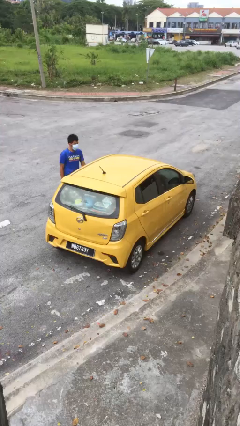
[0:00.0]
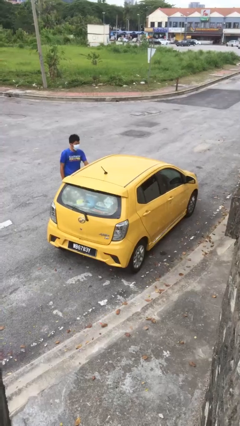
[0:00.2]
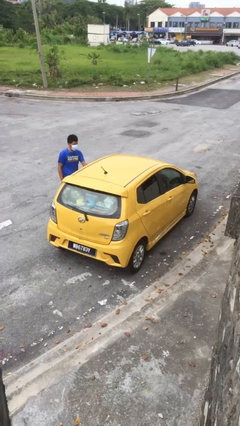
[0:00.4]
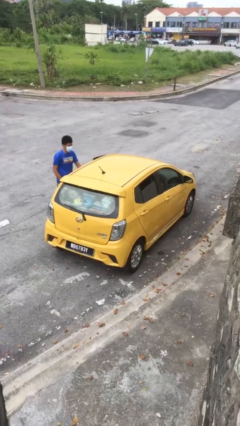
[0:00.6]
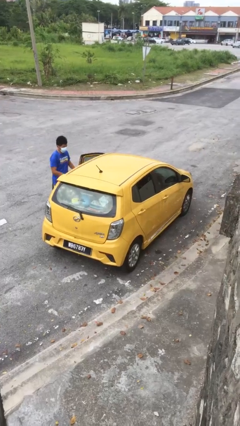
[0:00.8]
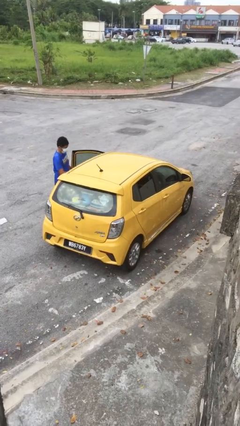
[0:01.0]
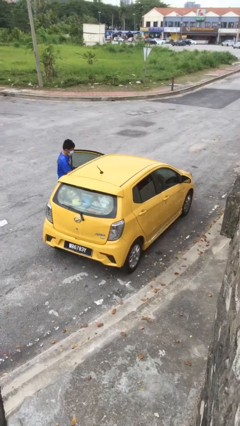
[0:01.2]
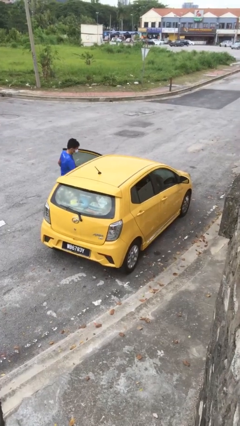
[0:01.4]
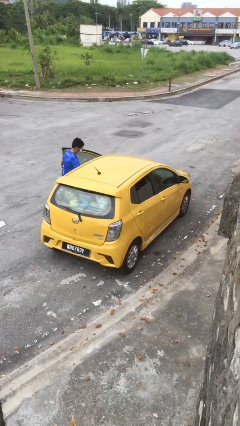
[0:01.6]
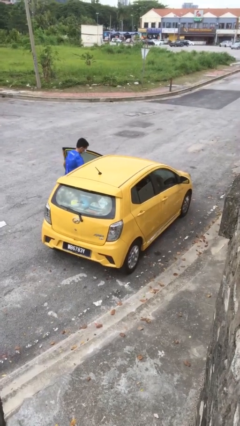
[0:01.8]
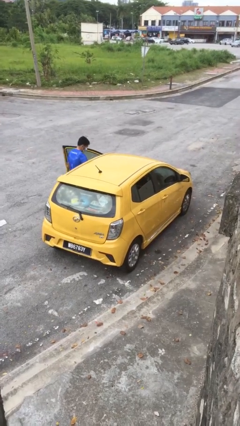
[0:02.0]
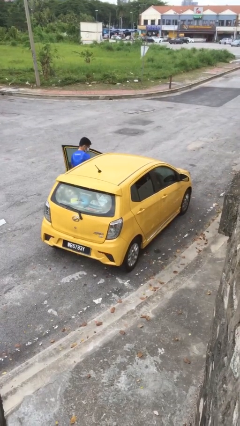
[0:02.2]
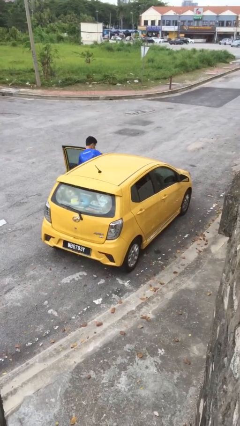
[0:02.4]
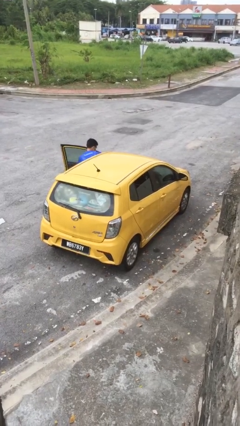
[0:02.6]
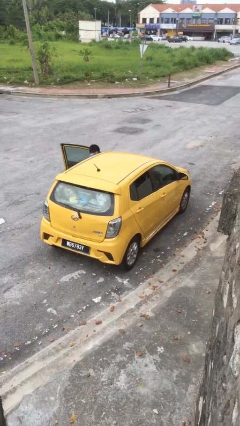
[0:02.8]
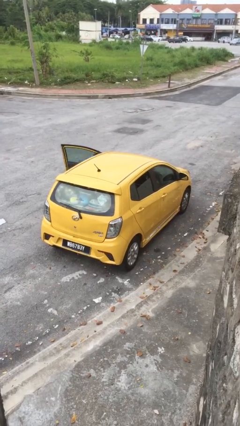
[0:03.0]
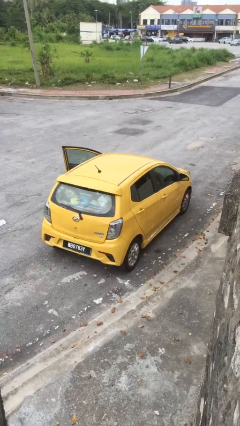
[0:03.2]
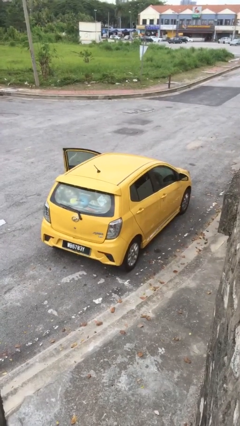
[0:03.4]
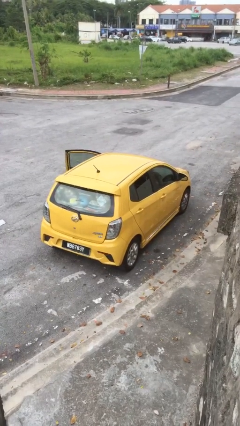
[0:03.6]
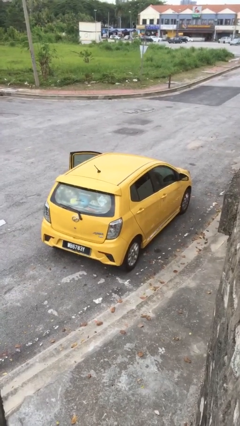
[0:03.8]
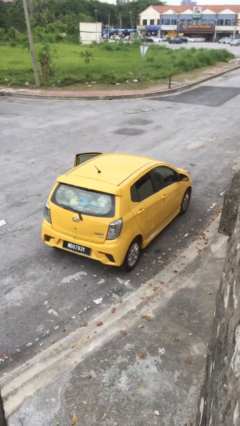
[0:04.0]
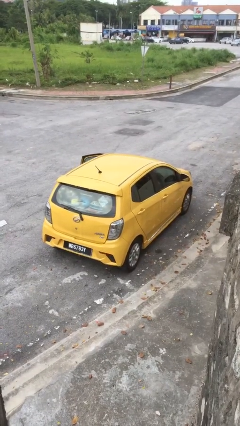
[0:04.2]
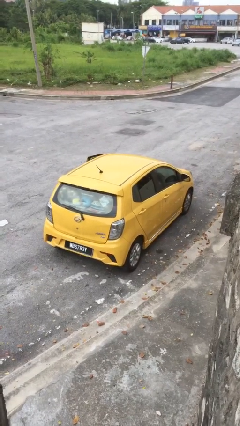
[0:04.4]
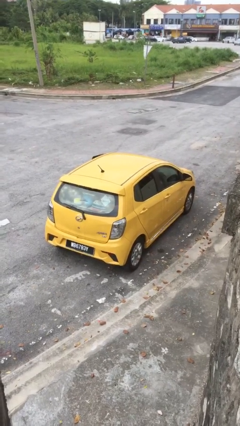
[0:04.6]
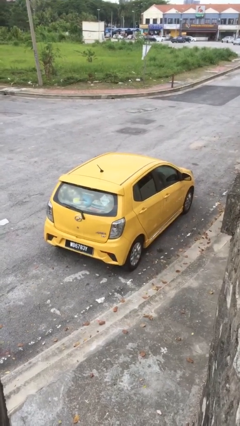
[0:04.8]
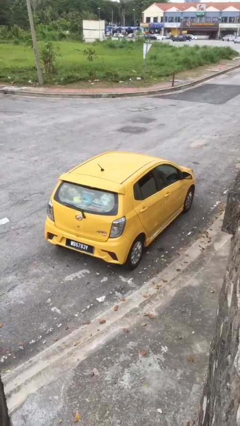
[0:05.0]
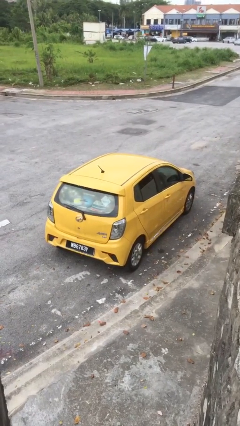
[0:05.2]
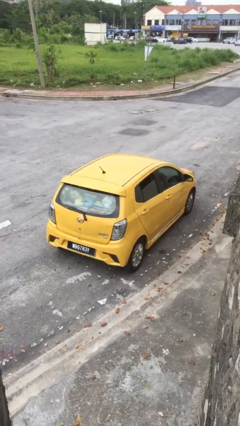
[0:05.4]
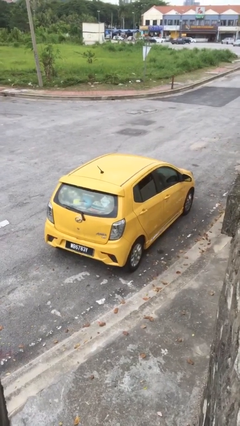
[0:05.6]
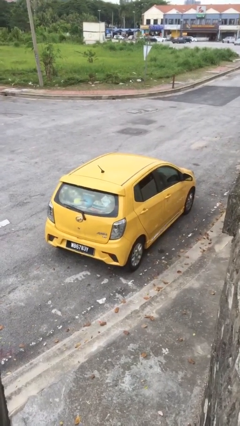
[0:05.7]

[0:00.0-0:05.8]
car picks up person

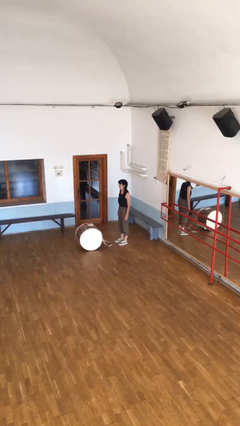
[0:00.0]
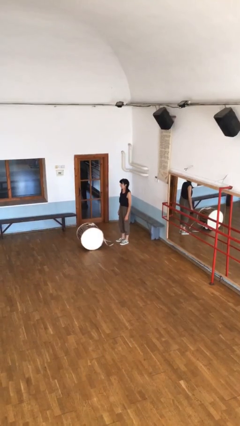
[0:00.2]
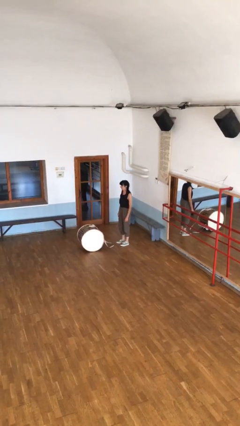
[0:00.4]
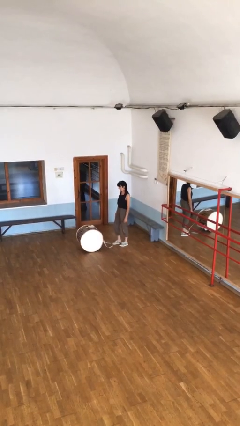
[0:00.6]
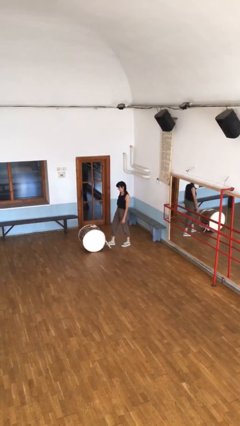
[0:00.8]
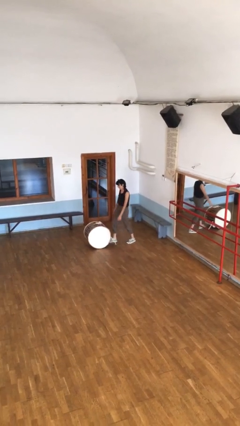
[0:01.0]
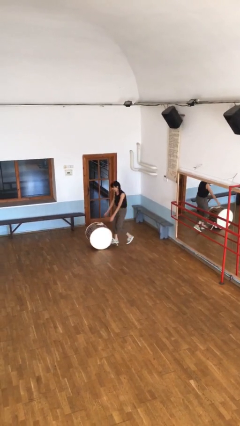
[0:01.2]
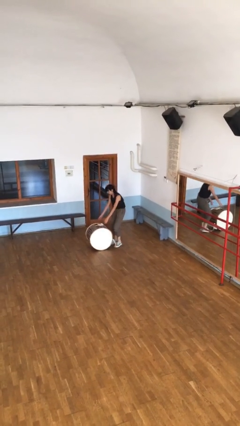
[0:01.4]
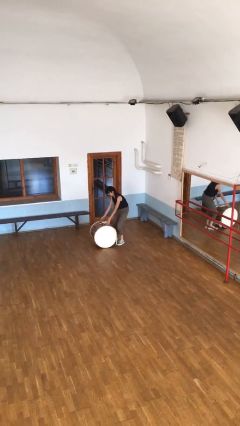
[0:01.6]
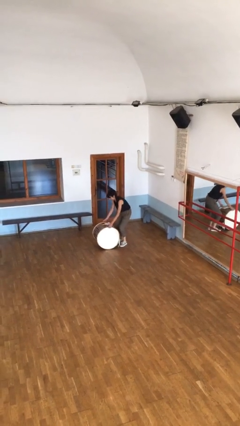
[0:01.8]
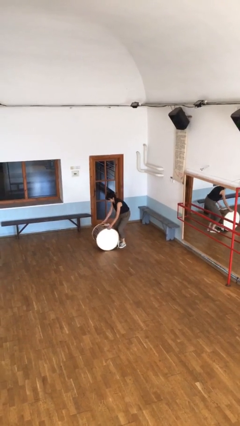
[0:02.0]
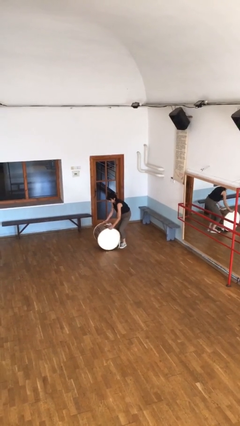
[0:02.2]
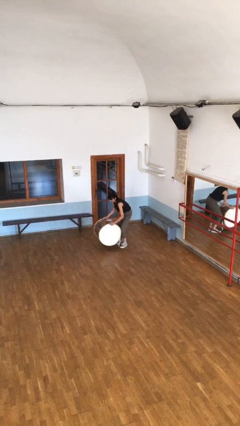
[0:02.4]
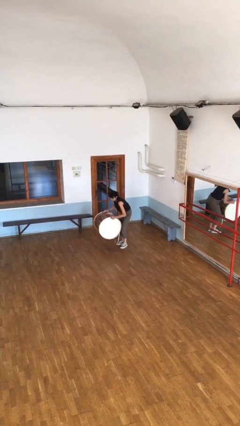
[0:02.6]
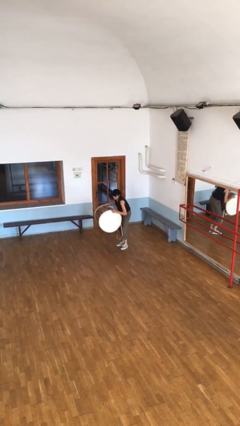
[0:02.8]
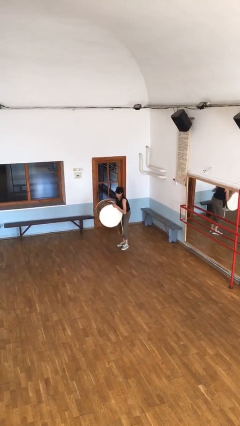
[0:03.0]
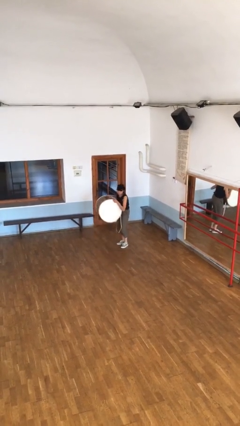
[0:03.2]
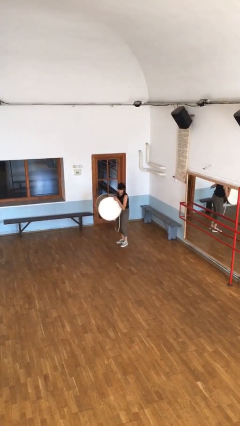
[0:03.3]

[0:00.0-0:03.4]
person picks up object from floor

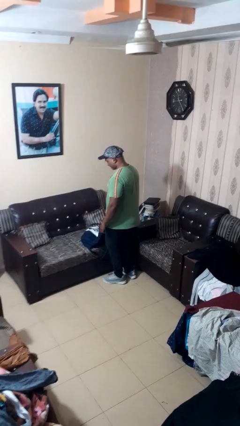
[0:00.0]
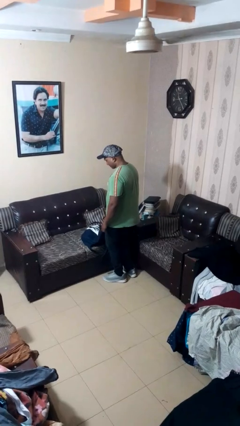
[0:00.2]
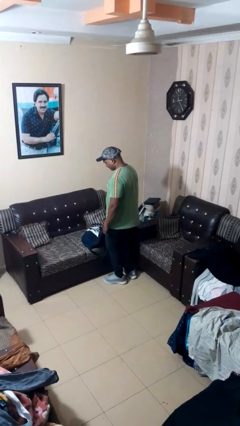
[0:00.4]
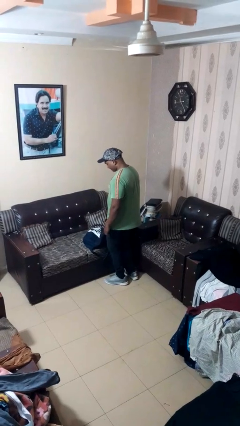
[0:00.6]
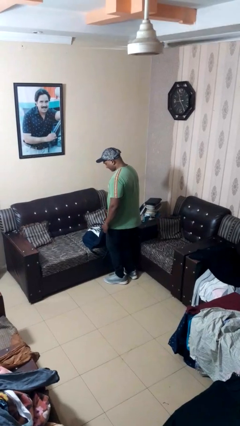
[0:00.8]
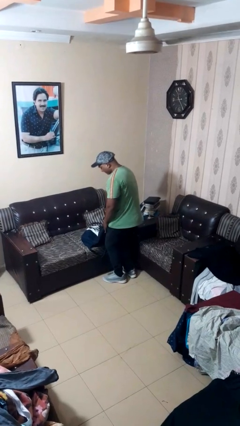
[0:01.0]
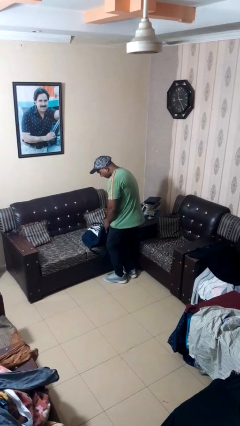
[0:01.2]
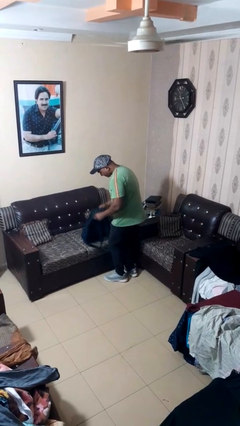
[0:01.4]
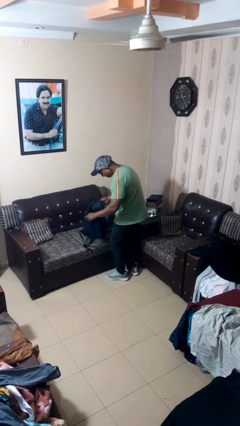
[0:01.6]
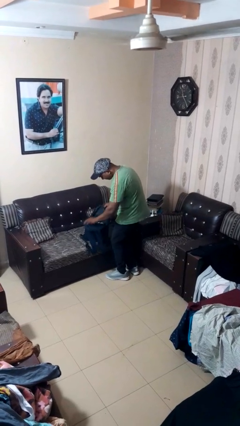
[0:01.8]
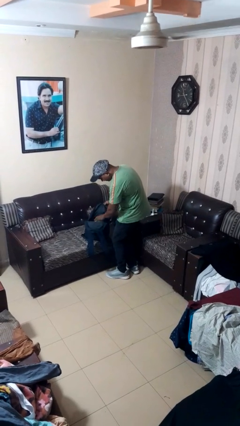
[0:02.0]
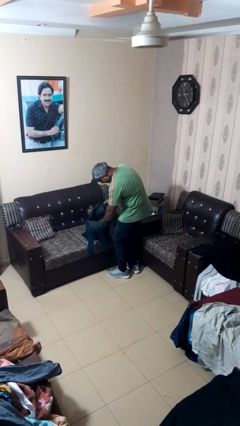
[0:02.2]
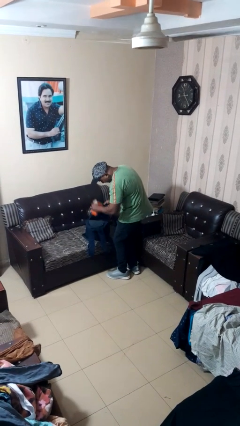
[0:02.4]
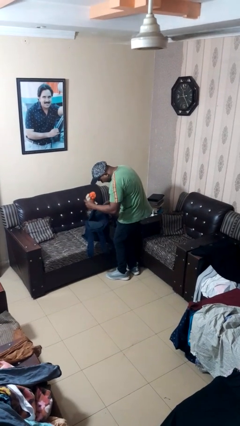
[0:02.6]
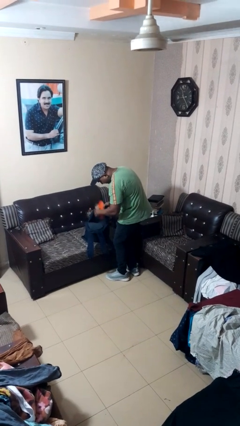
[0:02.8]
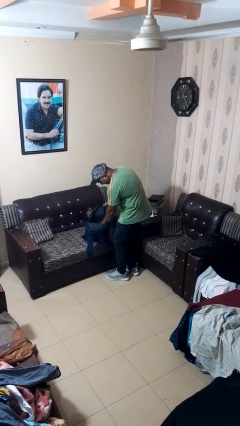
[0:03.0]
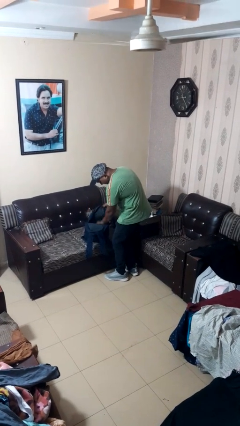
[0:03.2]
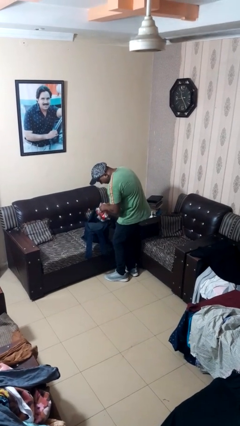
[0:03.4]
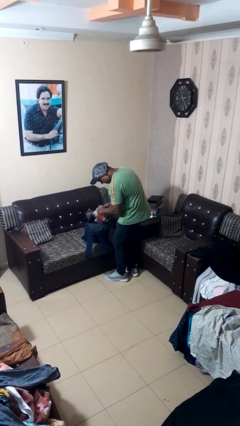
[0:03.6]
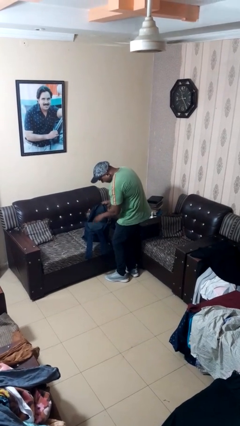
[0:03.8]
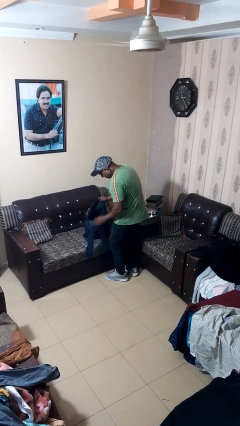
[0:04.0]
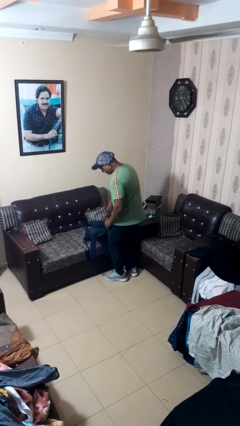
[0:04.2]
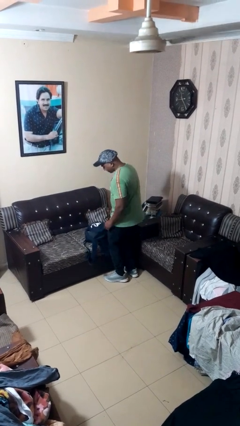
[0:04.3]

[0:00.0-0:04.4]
person searches in bag

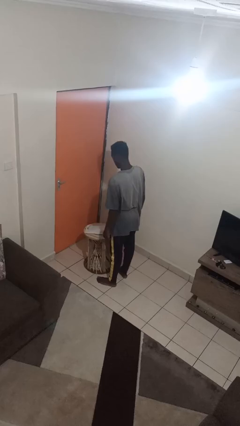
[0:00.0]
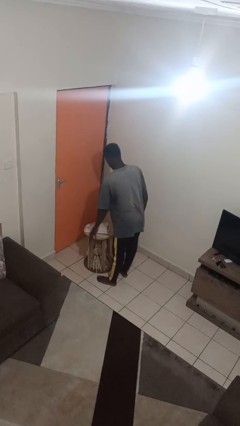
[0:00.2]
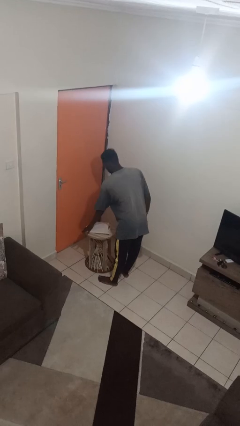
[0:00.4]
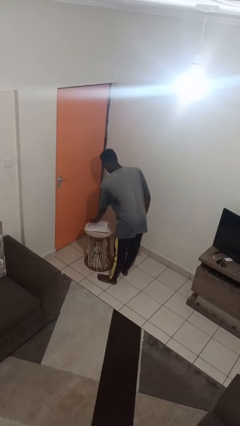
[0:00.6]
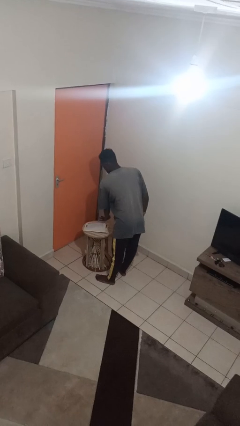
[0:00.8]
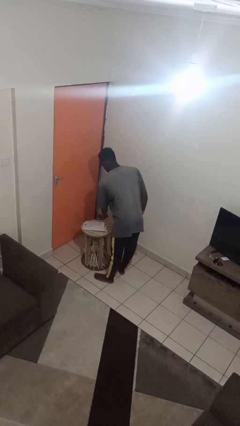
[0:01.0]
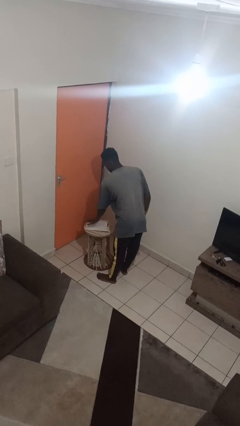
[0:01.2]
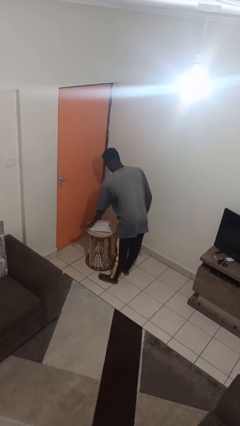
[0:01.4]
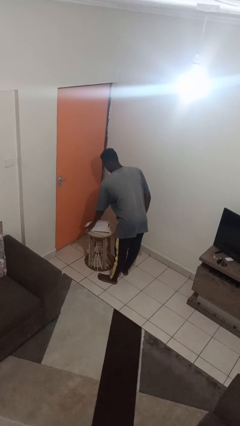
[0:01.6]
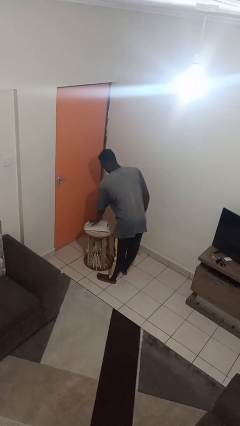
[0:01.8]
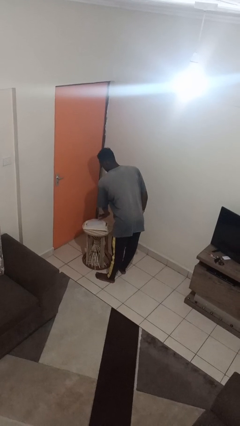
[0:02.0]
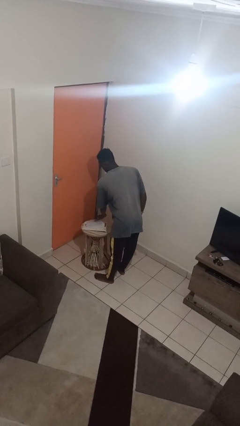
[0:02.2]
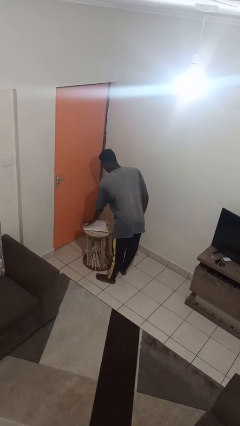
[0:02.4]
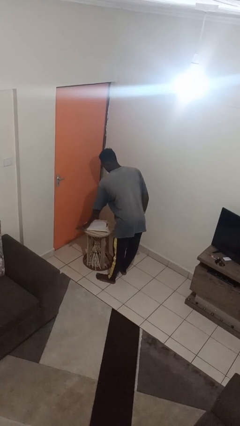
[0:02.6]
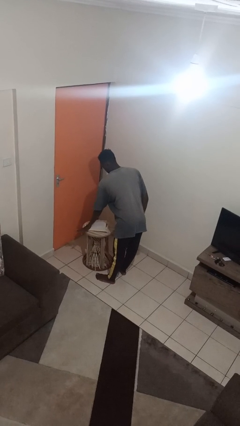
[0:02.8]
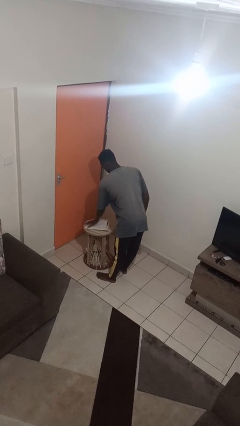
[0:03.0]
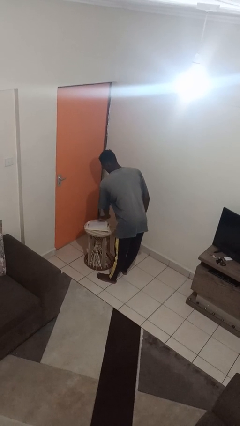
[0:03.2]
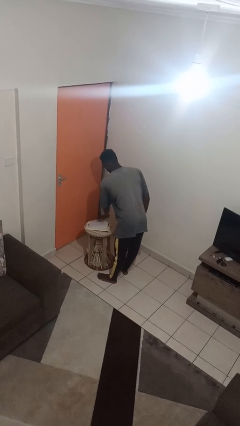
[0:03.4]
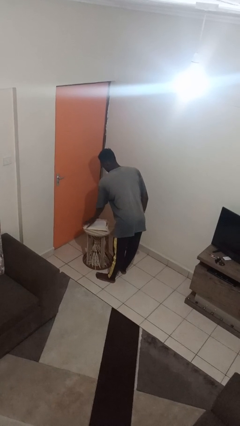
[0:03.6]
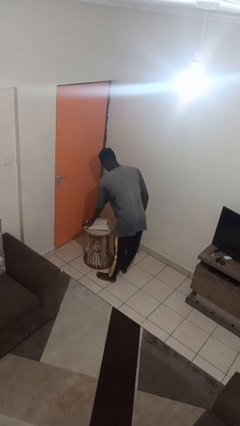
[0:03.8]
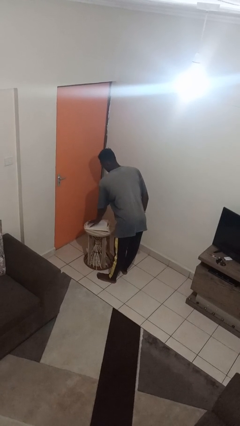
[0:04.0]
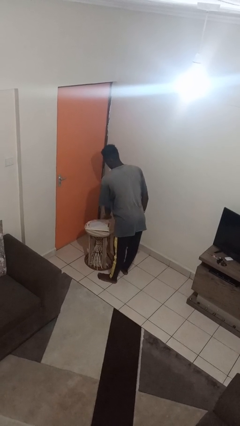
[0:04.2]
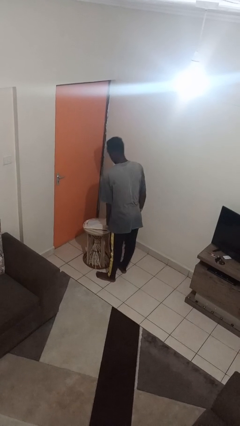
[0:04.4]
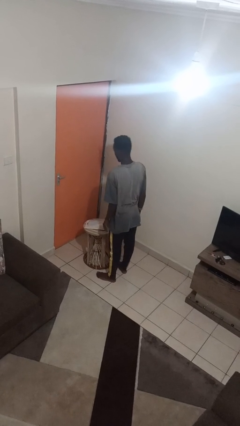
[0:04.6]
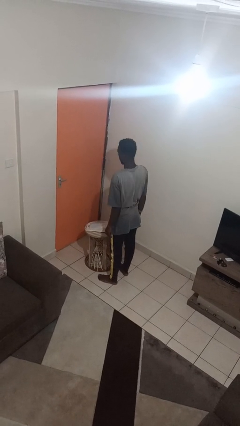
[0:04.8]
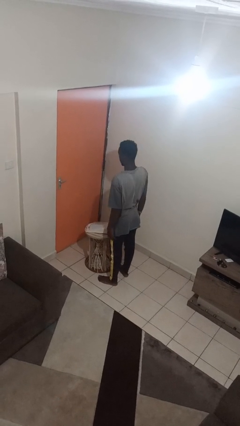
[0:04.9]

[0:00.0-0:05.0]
person waves hand over object
